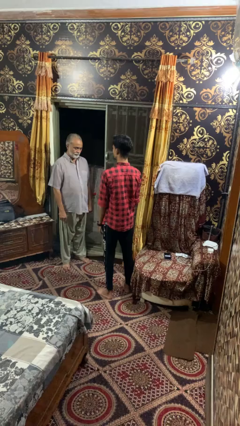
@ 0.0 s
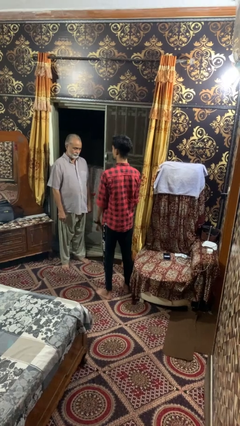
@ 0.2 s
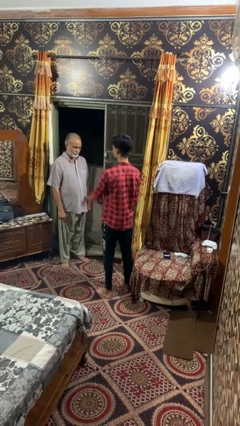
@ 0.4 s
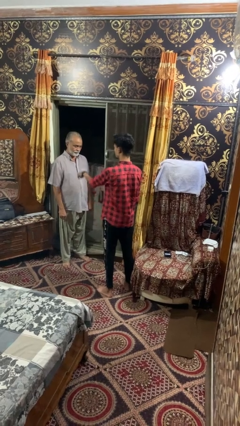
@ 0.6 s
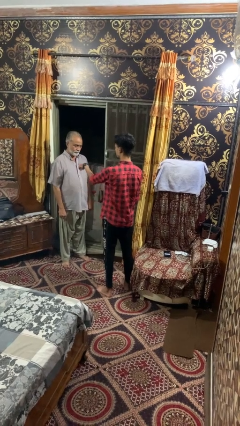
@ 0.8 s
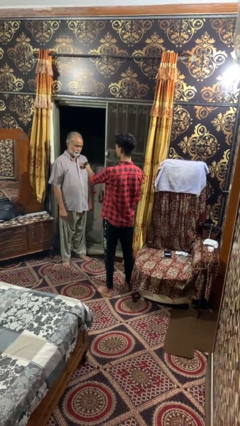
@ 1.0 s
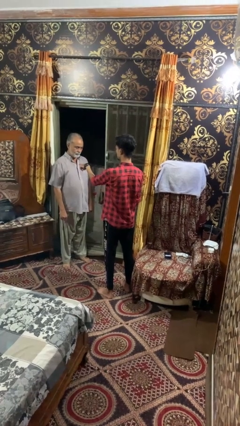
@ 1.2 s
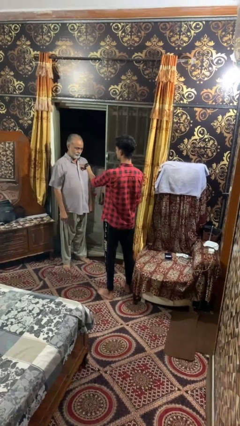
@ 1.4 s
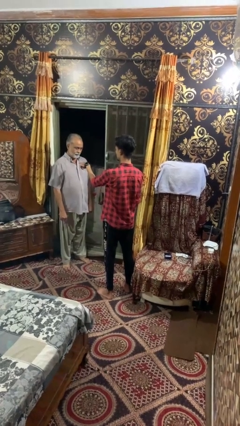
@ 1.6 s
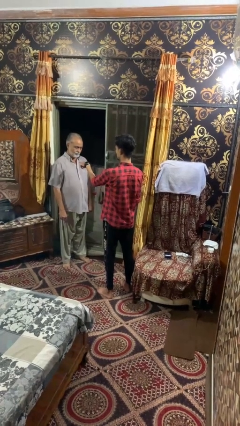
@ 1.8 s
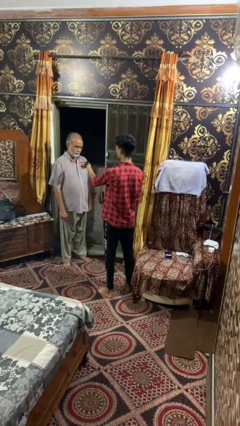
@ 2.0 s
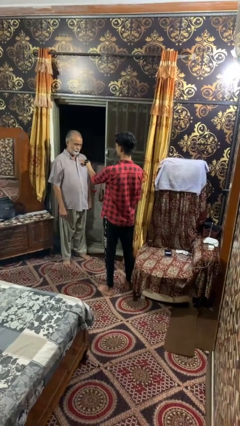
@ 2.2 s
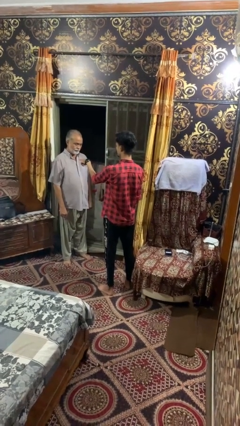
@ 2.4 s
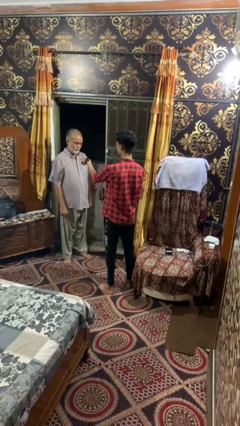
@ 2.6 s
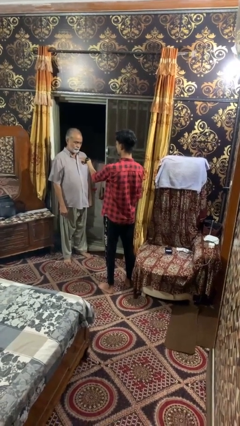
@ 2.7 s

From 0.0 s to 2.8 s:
person points at person

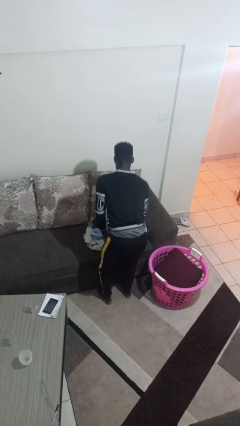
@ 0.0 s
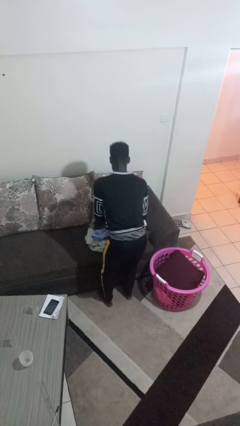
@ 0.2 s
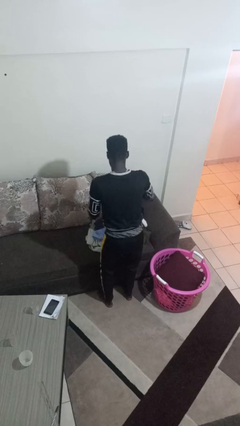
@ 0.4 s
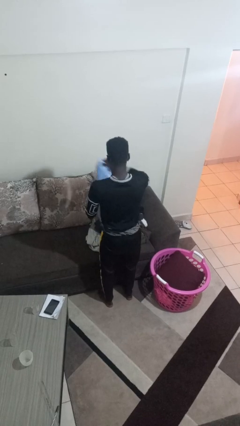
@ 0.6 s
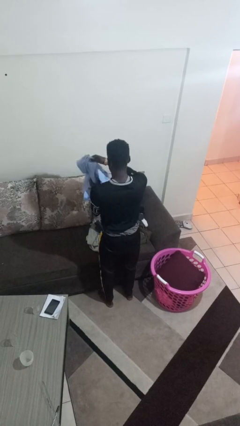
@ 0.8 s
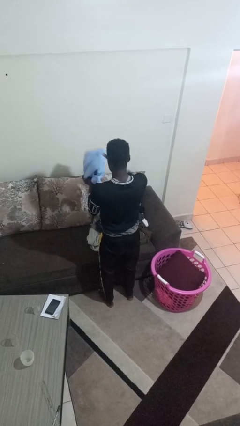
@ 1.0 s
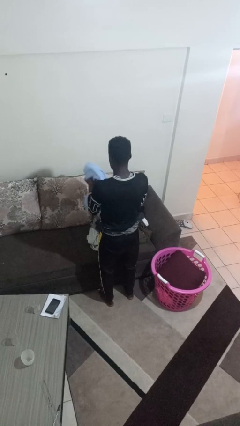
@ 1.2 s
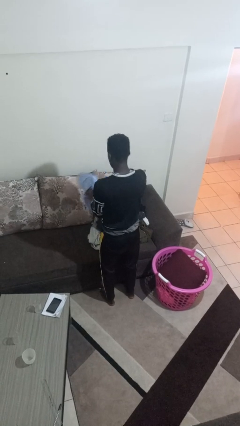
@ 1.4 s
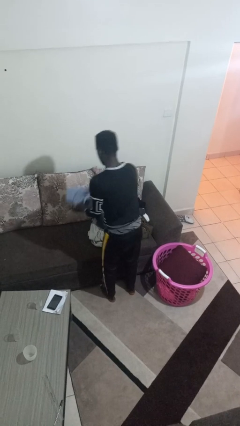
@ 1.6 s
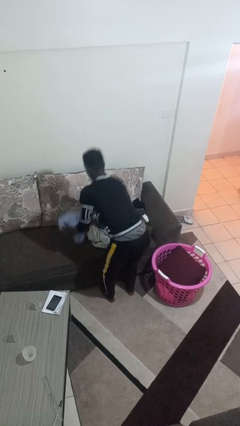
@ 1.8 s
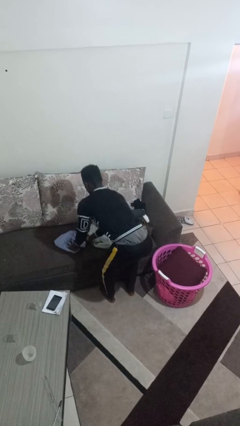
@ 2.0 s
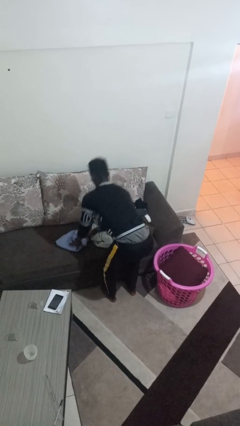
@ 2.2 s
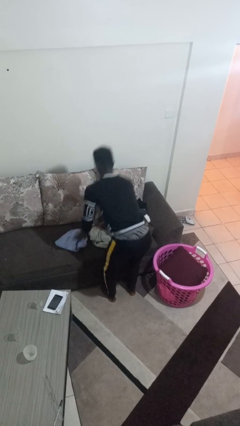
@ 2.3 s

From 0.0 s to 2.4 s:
person folds shirt

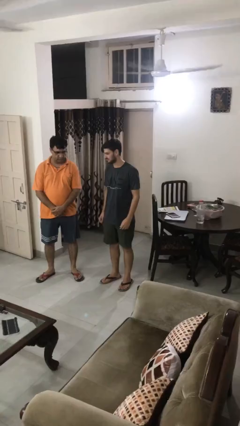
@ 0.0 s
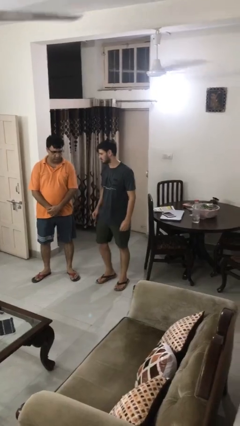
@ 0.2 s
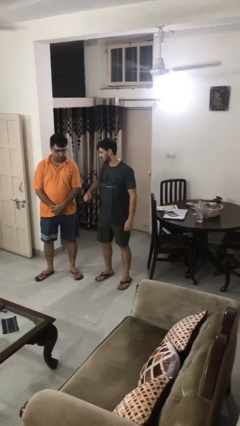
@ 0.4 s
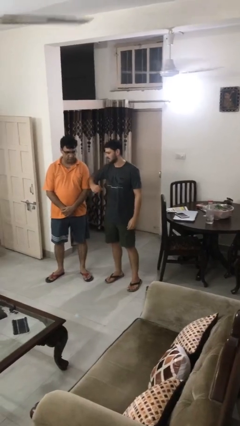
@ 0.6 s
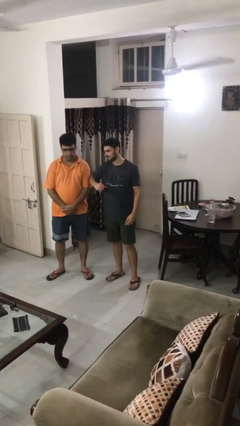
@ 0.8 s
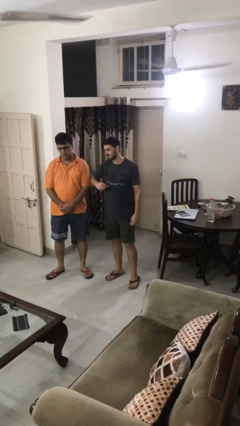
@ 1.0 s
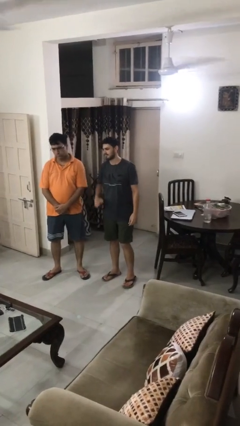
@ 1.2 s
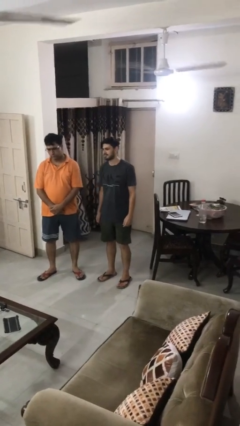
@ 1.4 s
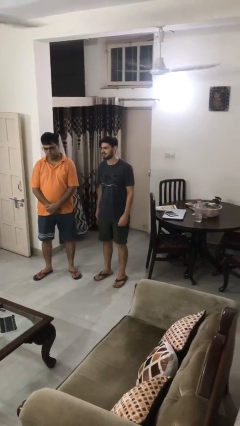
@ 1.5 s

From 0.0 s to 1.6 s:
person nudges person with elbow

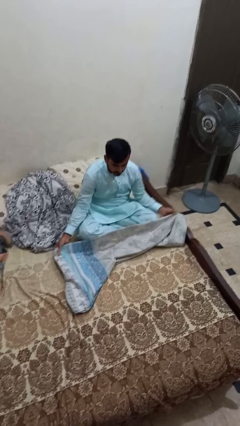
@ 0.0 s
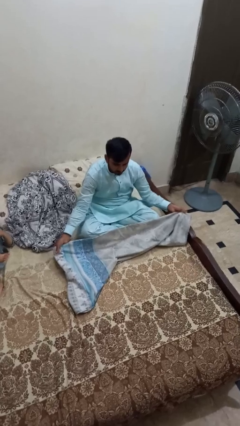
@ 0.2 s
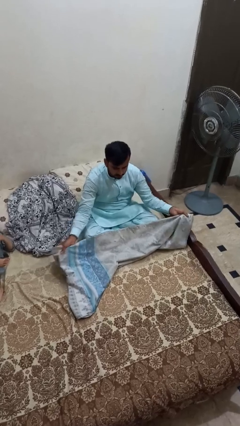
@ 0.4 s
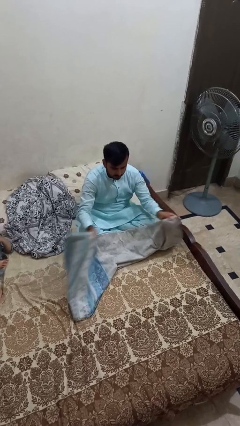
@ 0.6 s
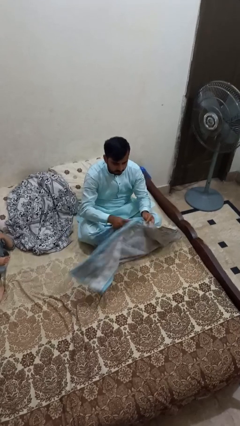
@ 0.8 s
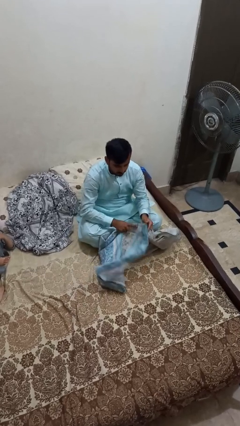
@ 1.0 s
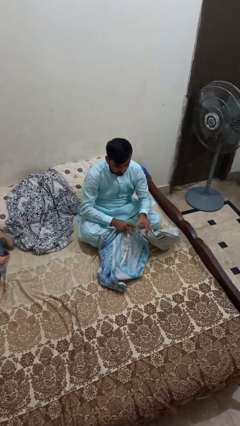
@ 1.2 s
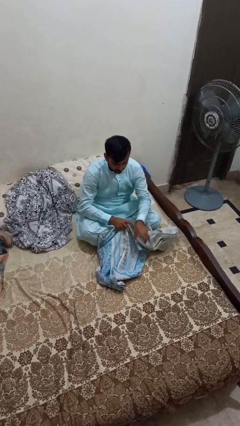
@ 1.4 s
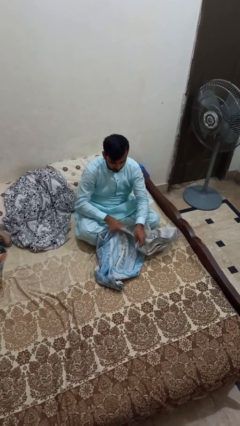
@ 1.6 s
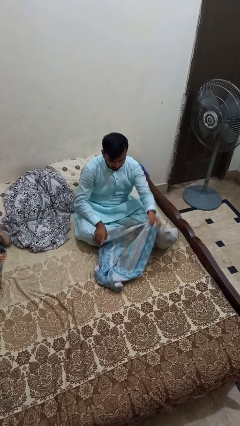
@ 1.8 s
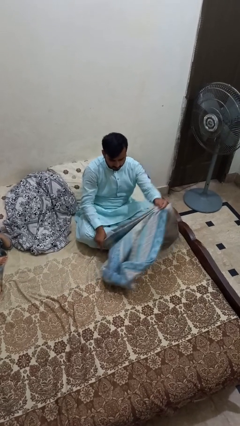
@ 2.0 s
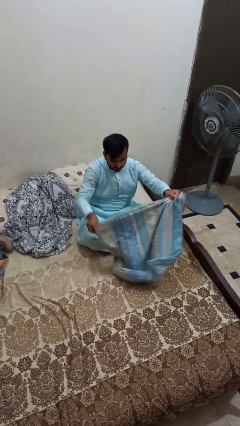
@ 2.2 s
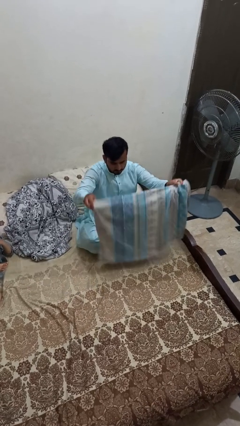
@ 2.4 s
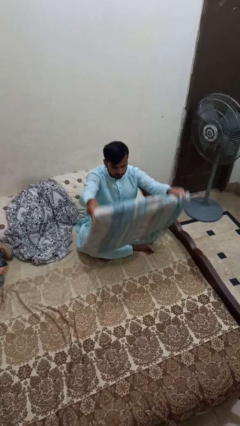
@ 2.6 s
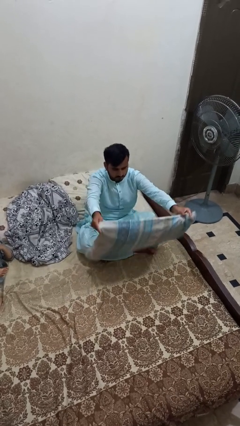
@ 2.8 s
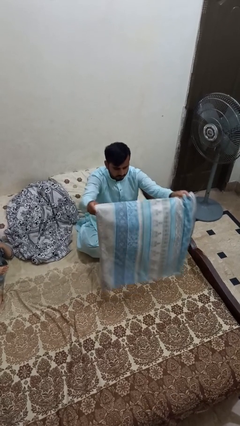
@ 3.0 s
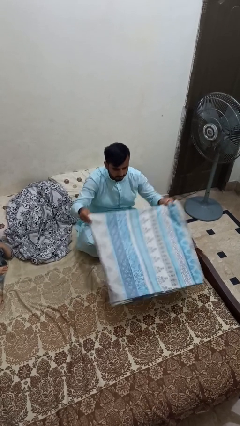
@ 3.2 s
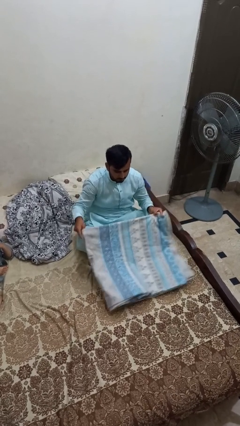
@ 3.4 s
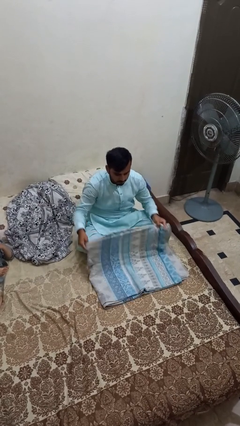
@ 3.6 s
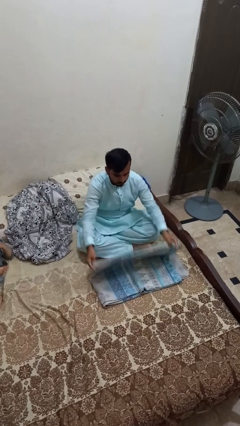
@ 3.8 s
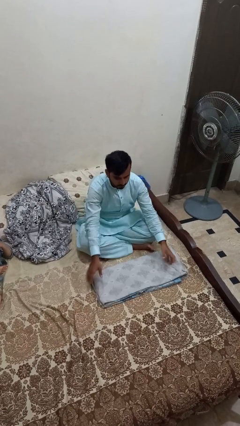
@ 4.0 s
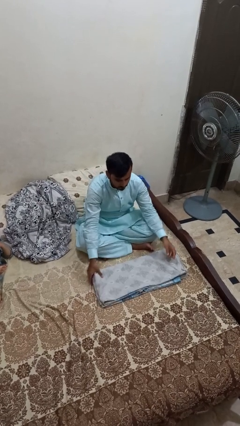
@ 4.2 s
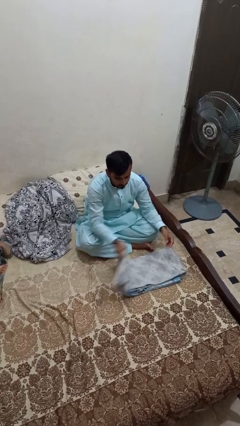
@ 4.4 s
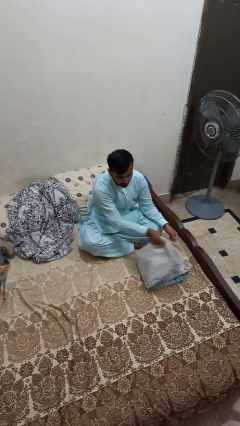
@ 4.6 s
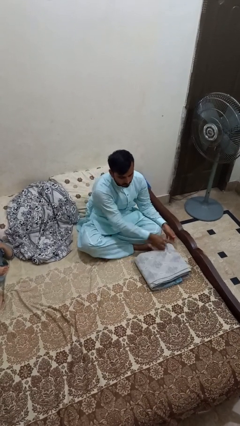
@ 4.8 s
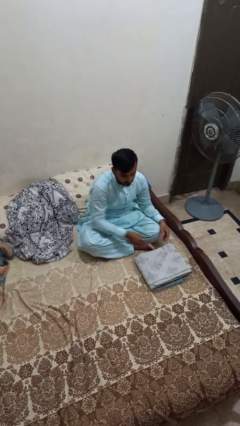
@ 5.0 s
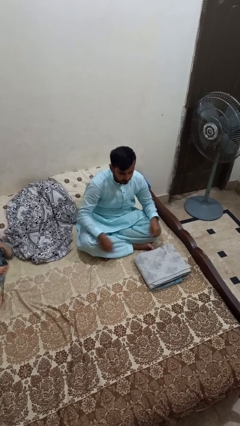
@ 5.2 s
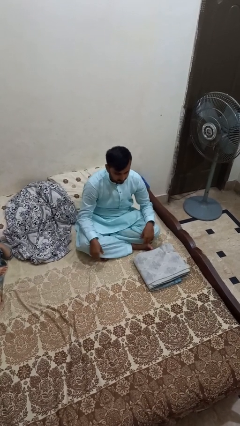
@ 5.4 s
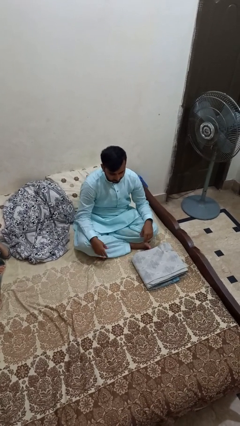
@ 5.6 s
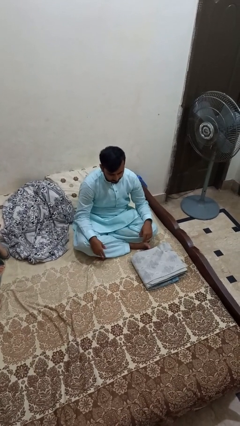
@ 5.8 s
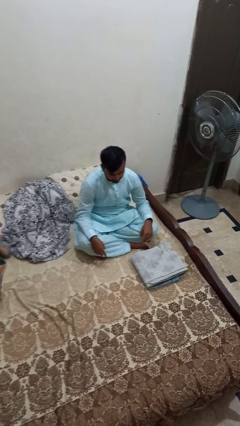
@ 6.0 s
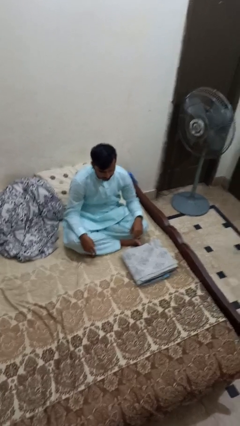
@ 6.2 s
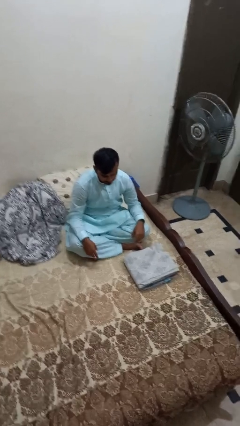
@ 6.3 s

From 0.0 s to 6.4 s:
person folds blanket

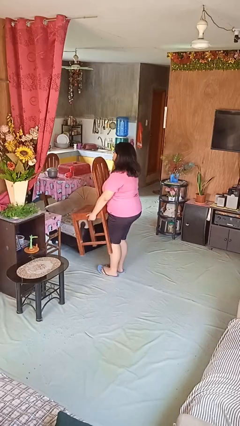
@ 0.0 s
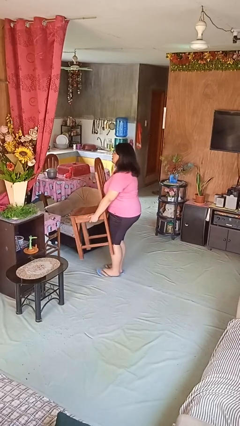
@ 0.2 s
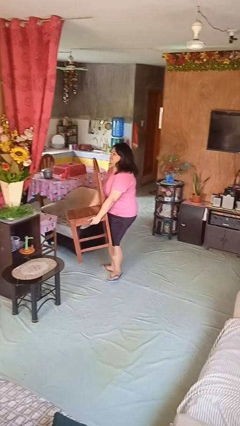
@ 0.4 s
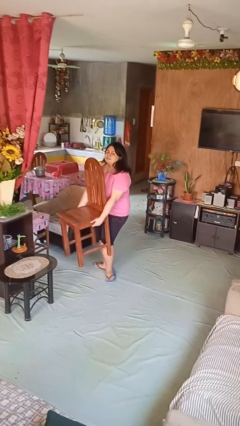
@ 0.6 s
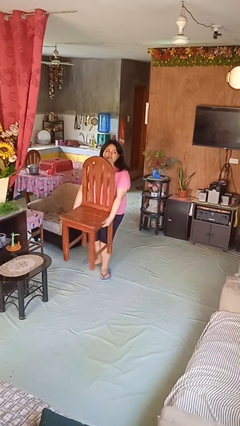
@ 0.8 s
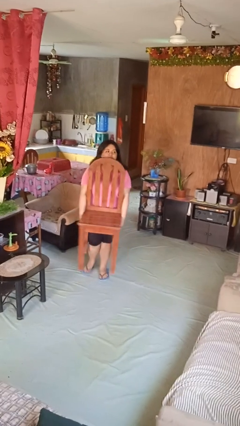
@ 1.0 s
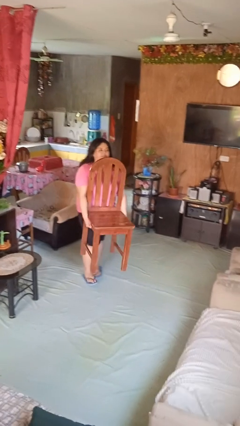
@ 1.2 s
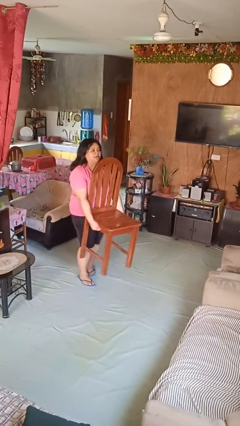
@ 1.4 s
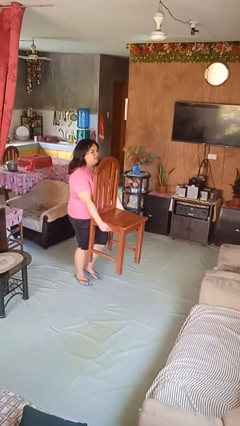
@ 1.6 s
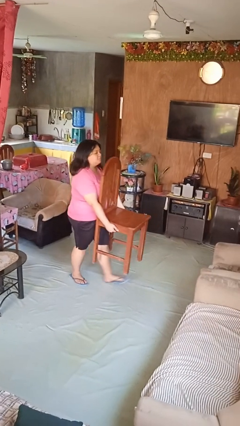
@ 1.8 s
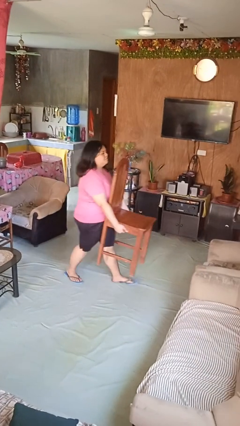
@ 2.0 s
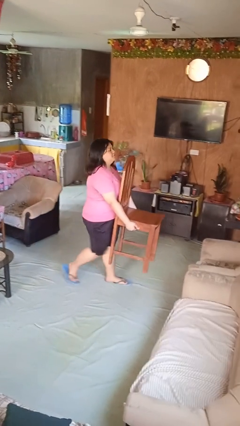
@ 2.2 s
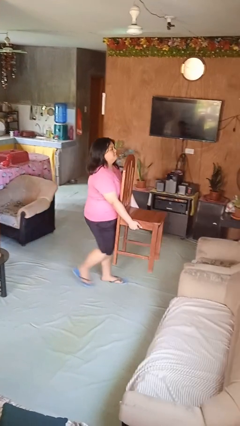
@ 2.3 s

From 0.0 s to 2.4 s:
person carries furniture

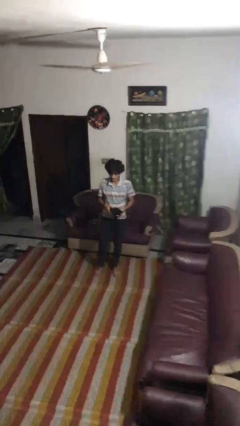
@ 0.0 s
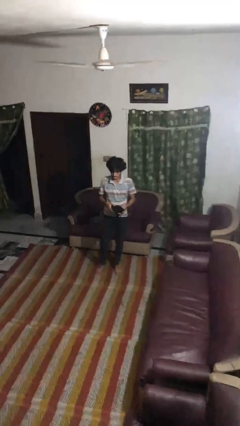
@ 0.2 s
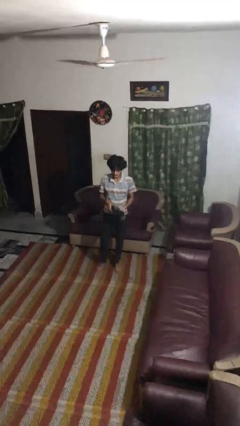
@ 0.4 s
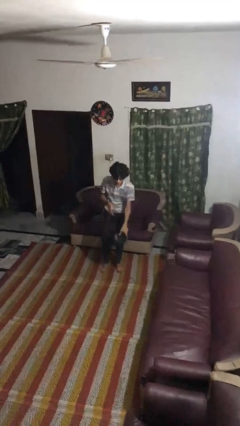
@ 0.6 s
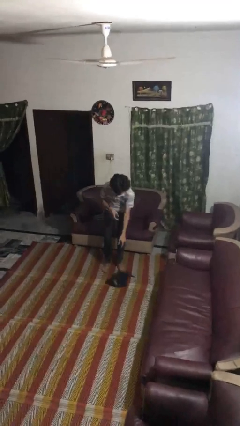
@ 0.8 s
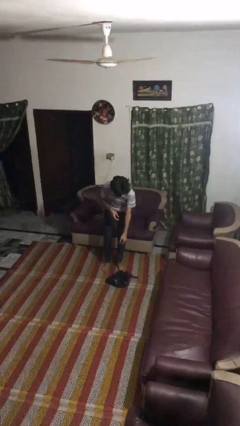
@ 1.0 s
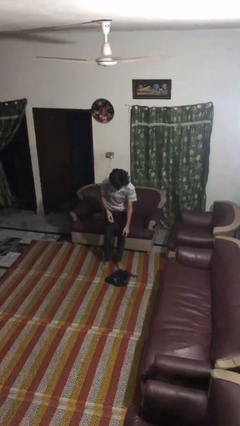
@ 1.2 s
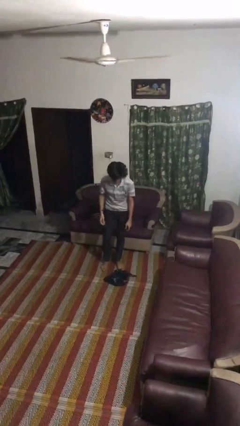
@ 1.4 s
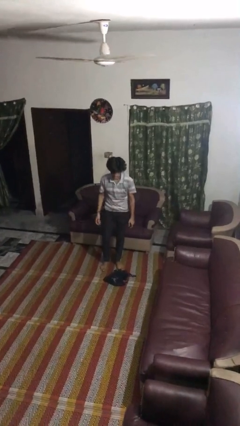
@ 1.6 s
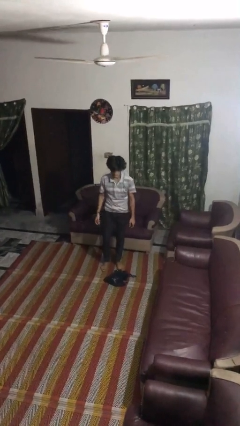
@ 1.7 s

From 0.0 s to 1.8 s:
person drops object

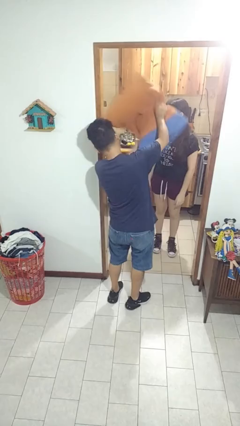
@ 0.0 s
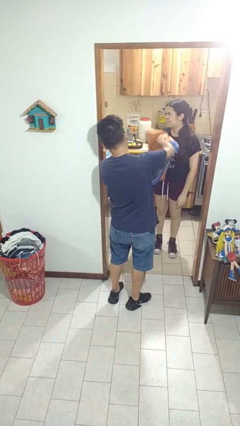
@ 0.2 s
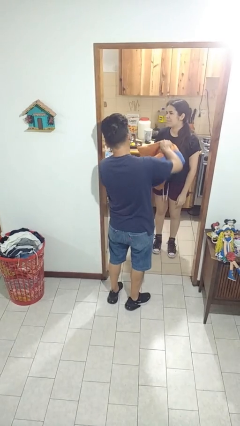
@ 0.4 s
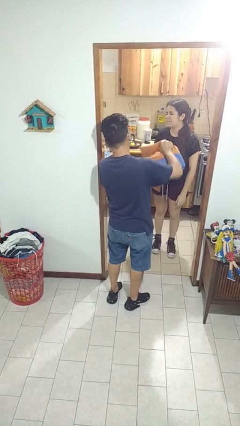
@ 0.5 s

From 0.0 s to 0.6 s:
person hits person with pillow
